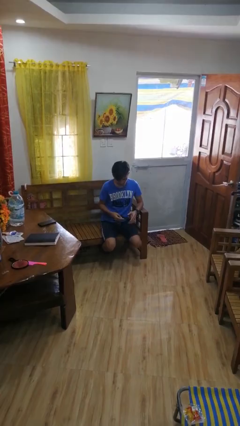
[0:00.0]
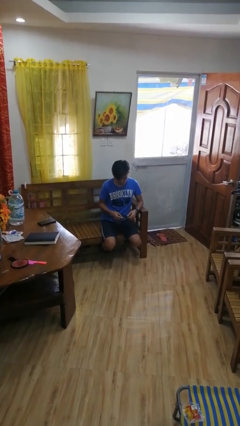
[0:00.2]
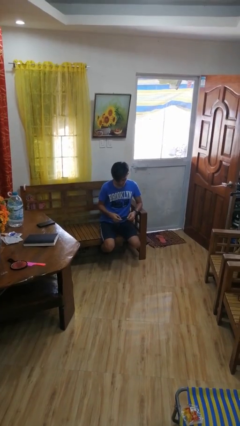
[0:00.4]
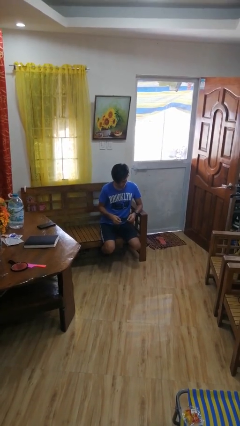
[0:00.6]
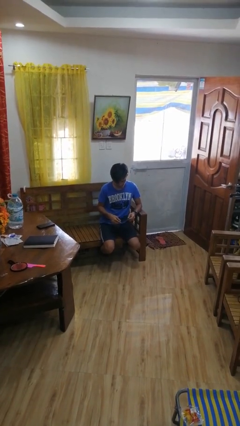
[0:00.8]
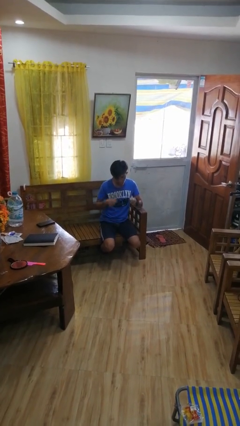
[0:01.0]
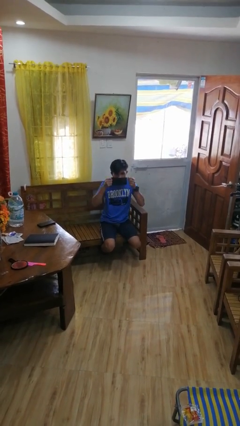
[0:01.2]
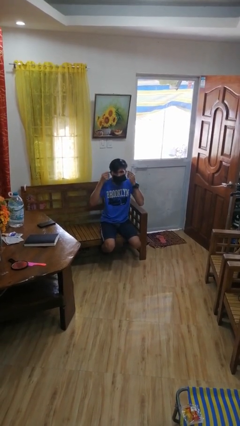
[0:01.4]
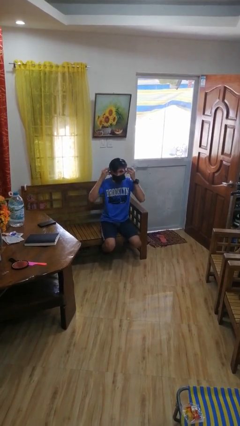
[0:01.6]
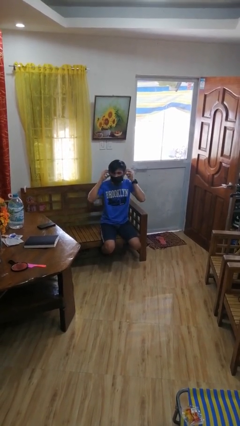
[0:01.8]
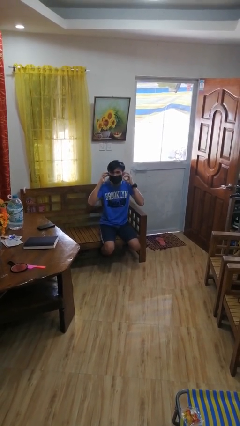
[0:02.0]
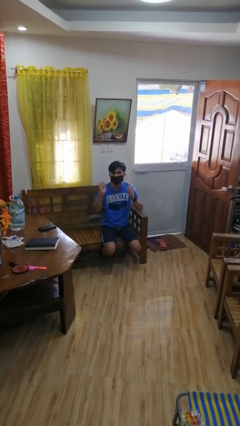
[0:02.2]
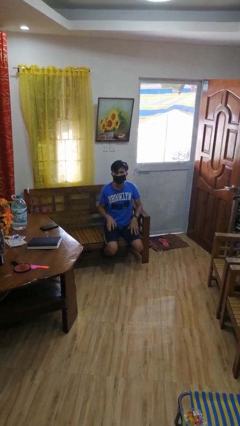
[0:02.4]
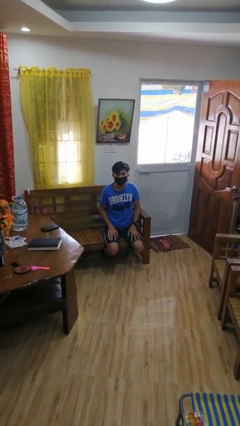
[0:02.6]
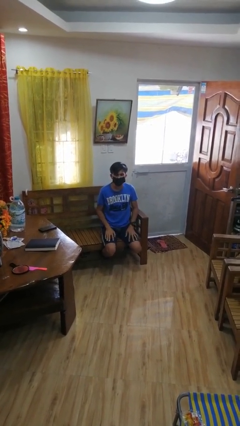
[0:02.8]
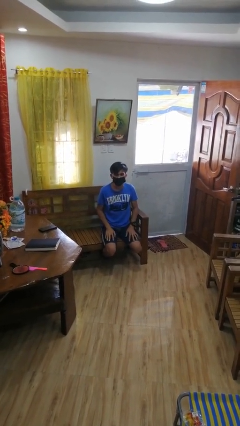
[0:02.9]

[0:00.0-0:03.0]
person puts on facemask

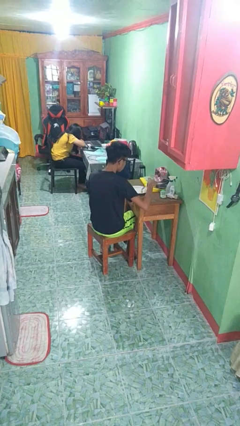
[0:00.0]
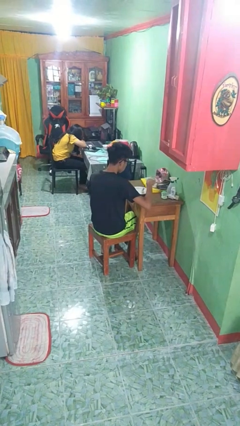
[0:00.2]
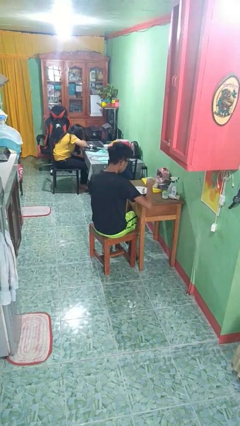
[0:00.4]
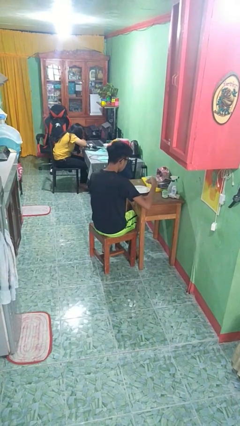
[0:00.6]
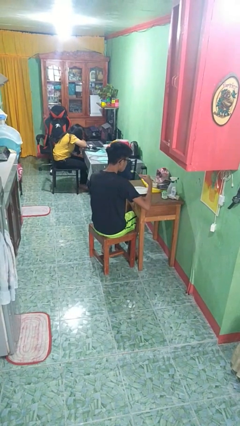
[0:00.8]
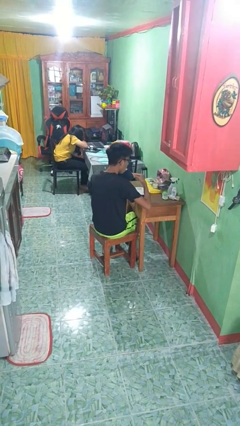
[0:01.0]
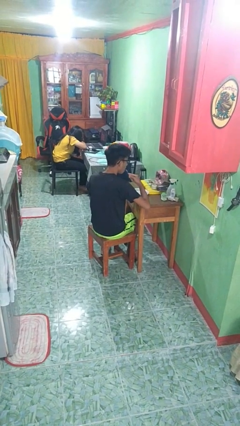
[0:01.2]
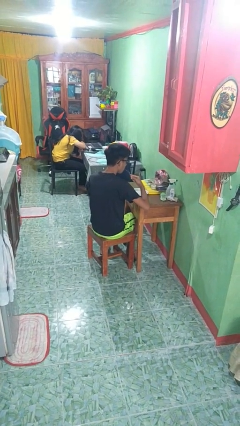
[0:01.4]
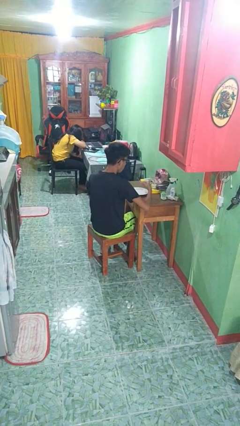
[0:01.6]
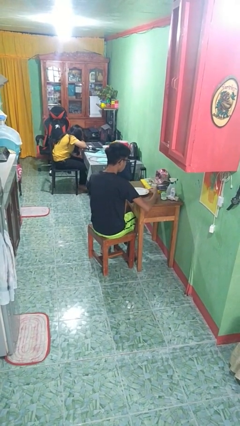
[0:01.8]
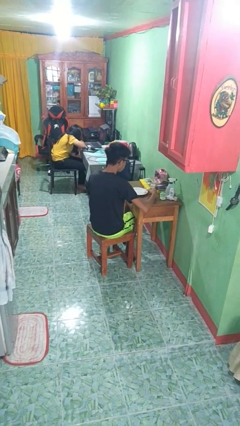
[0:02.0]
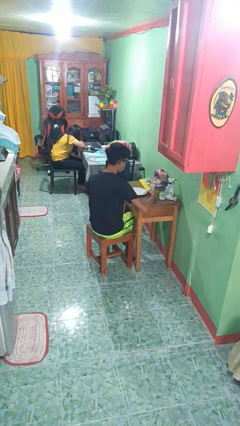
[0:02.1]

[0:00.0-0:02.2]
person eats with utensil

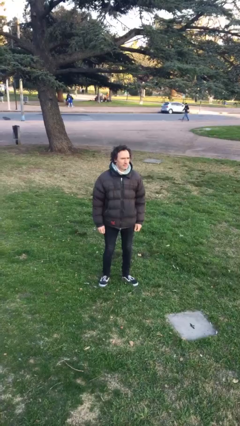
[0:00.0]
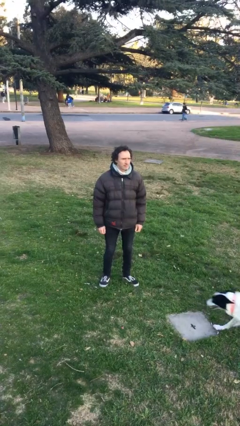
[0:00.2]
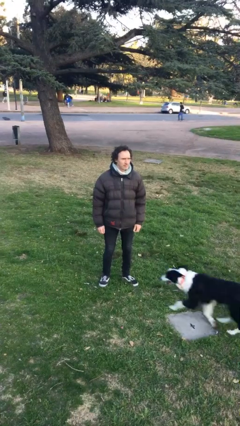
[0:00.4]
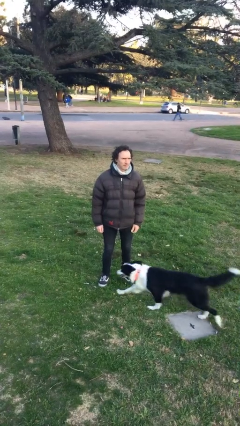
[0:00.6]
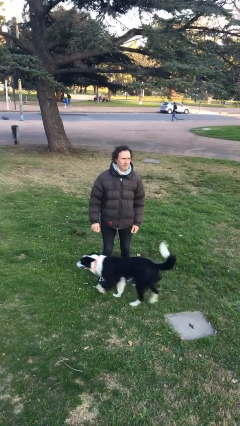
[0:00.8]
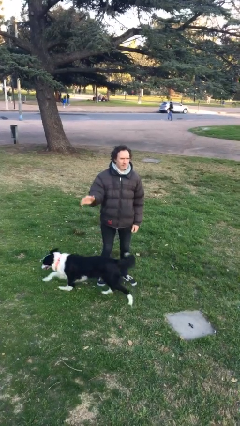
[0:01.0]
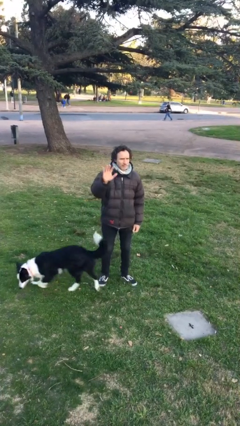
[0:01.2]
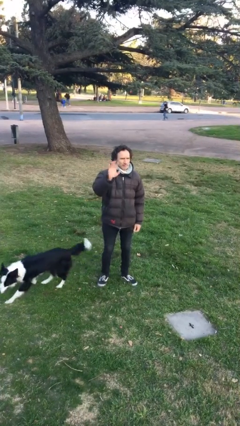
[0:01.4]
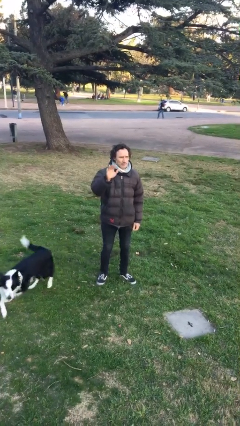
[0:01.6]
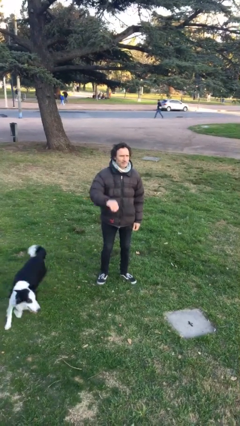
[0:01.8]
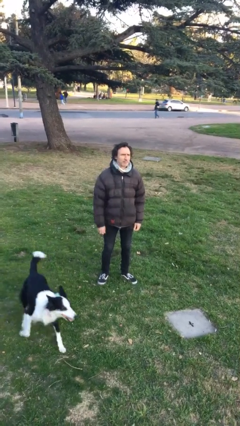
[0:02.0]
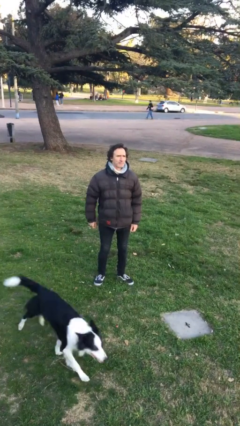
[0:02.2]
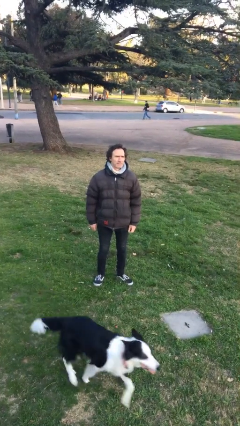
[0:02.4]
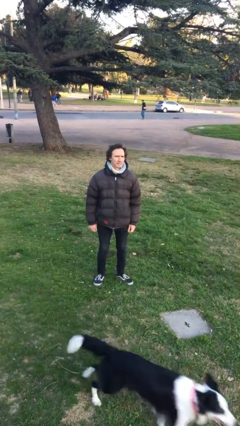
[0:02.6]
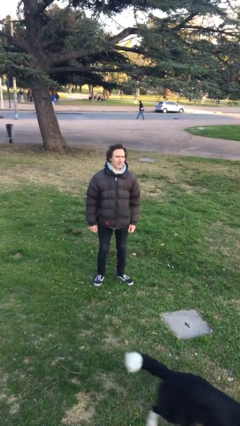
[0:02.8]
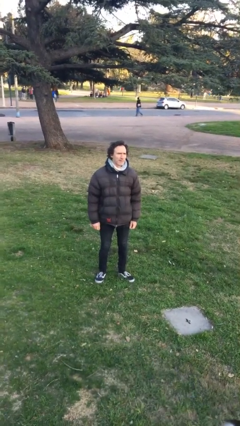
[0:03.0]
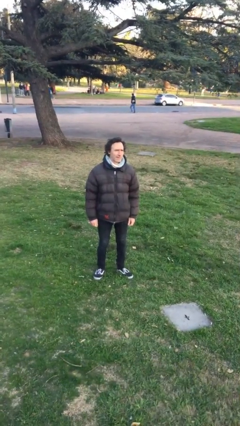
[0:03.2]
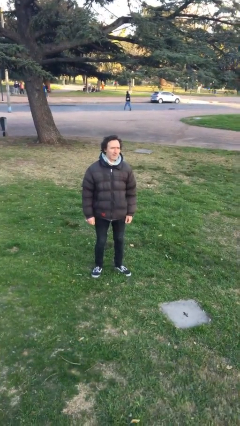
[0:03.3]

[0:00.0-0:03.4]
person waves at person

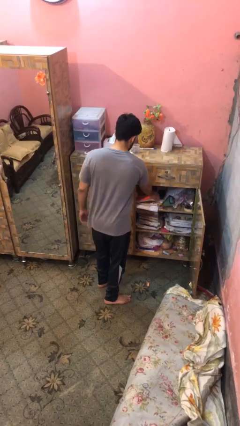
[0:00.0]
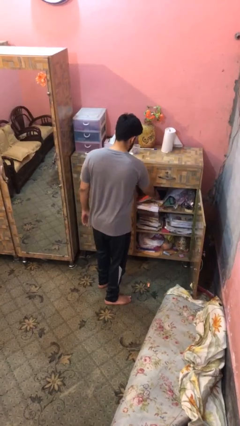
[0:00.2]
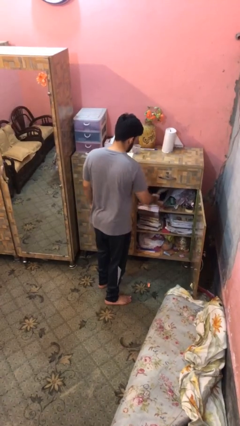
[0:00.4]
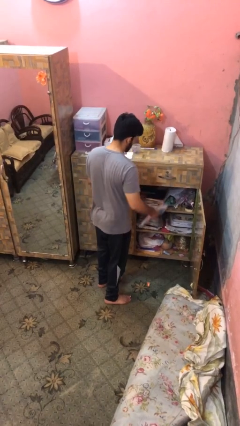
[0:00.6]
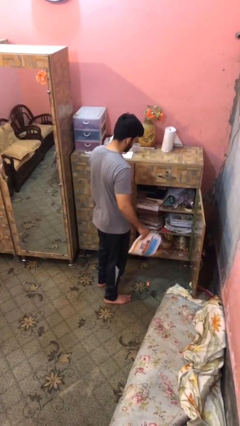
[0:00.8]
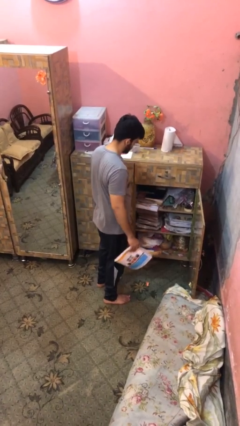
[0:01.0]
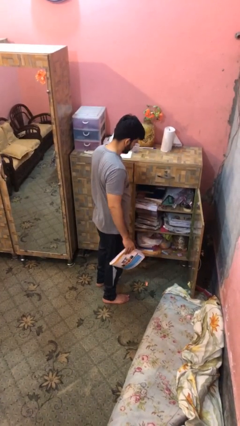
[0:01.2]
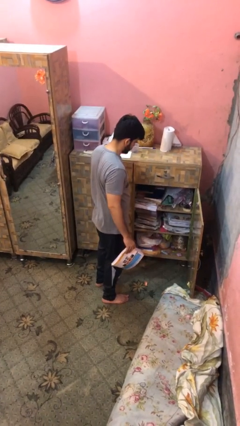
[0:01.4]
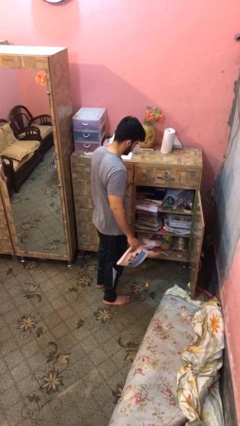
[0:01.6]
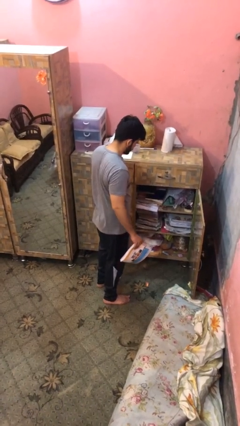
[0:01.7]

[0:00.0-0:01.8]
person picks up object from cabinet

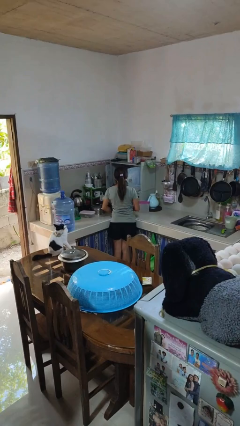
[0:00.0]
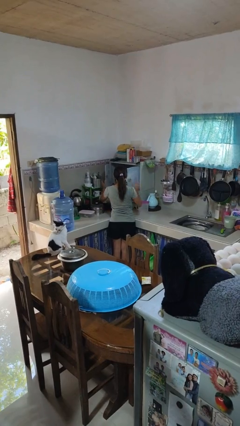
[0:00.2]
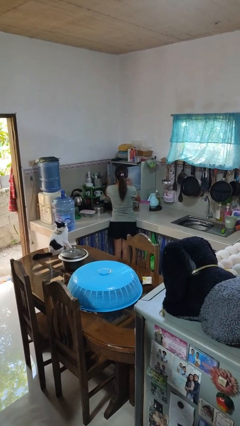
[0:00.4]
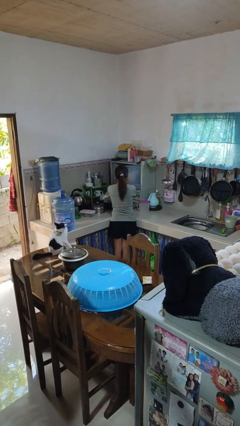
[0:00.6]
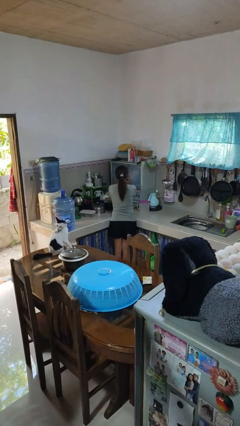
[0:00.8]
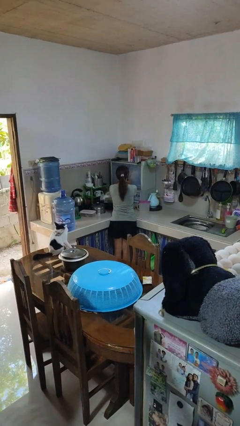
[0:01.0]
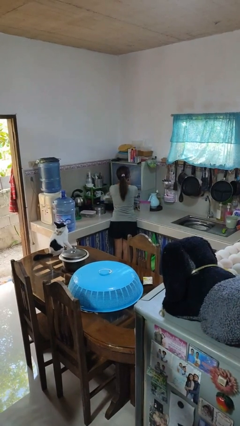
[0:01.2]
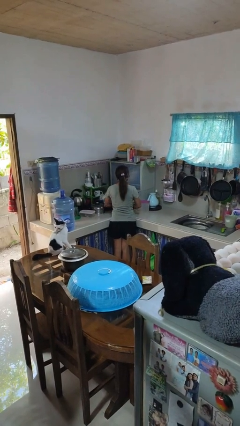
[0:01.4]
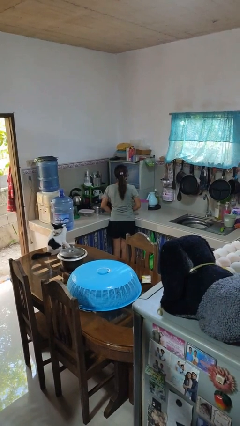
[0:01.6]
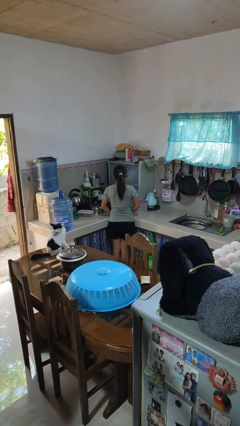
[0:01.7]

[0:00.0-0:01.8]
person closes kitchen drawer

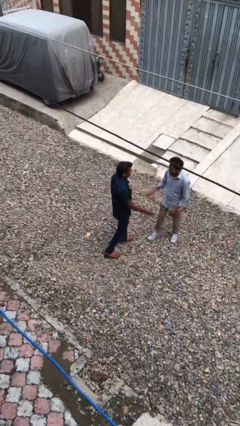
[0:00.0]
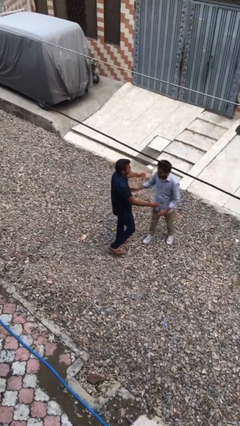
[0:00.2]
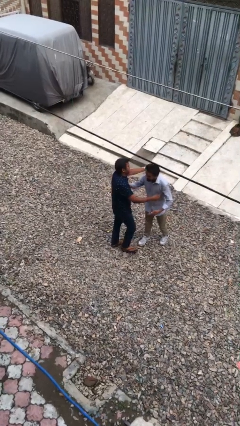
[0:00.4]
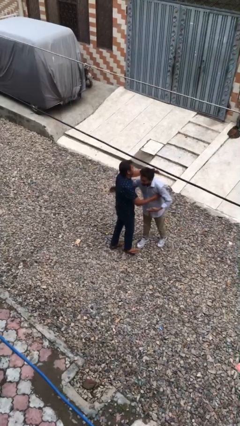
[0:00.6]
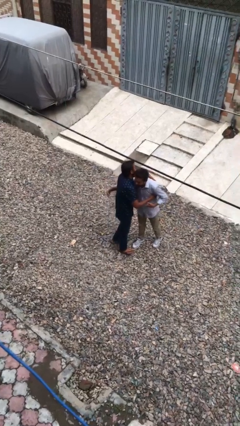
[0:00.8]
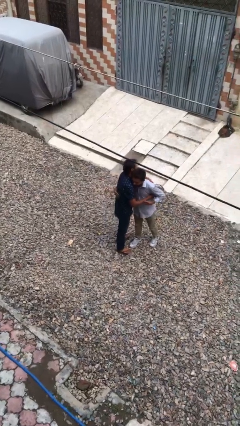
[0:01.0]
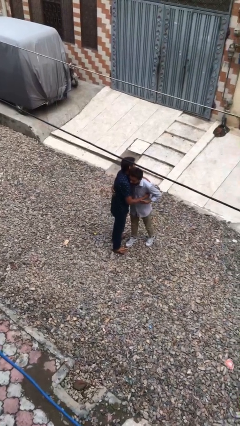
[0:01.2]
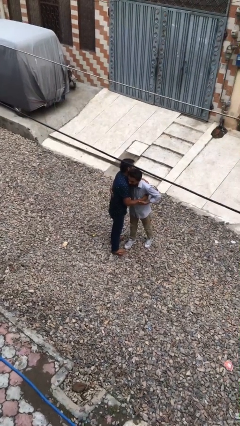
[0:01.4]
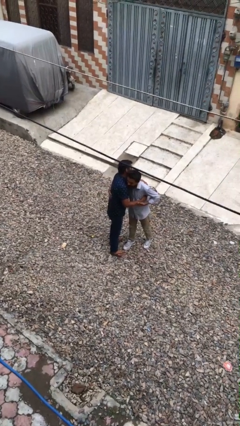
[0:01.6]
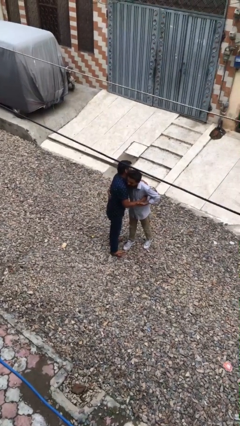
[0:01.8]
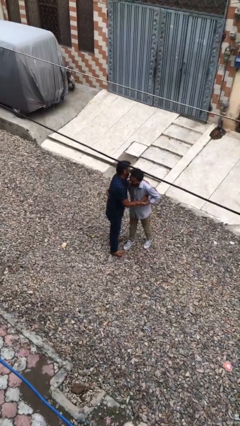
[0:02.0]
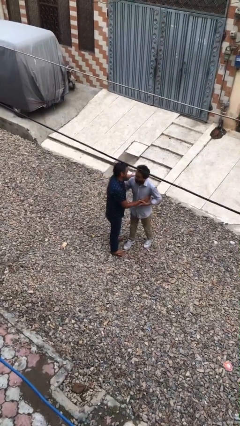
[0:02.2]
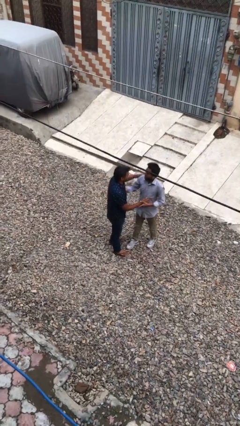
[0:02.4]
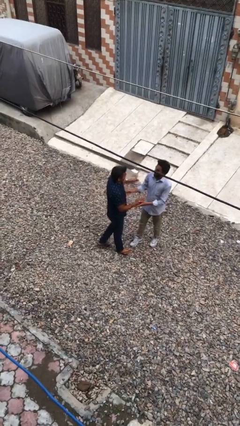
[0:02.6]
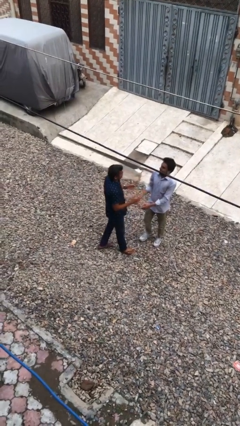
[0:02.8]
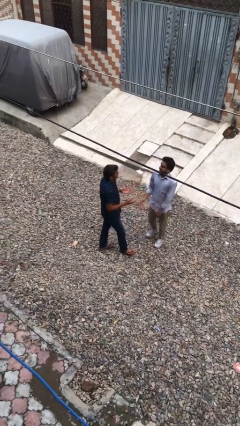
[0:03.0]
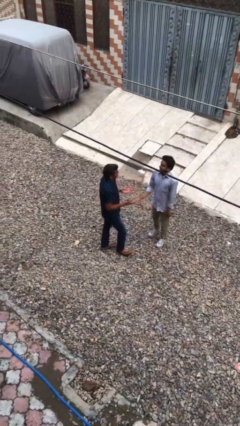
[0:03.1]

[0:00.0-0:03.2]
person embraces person

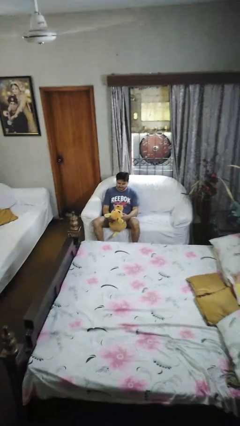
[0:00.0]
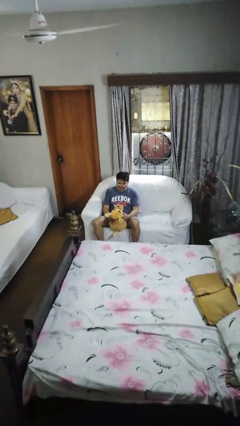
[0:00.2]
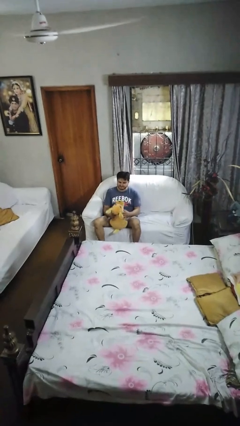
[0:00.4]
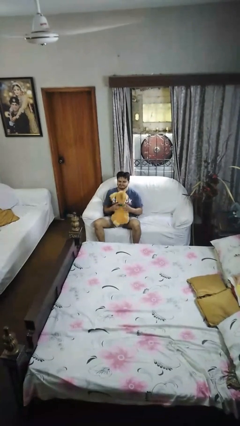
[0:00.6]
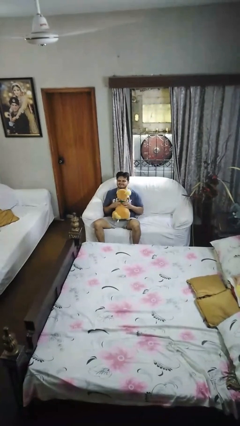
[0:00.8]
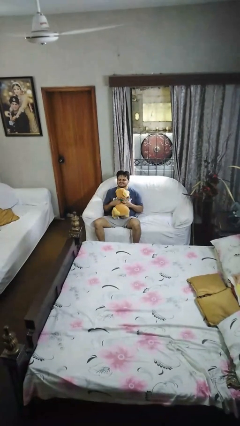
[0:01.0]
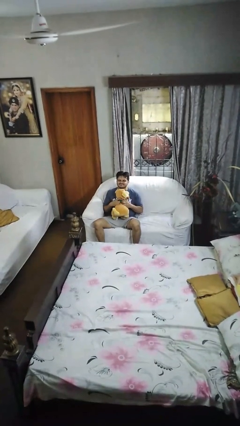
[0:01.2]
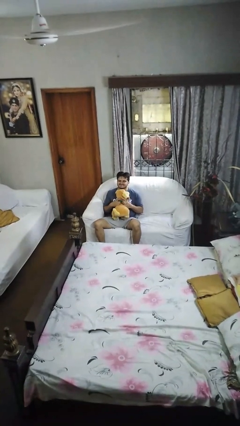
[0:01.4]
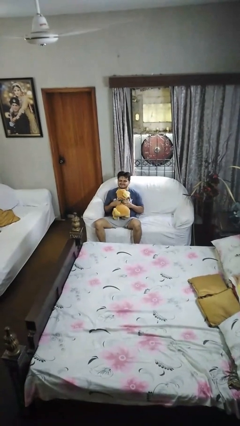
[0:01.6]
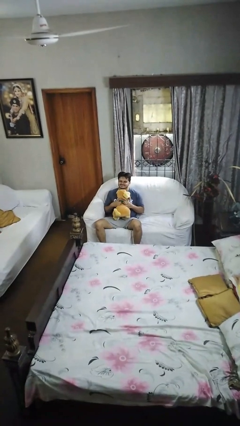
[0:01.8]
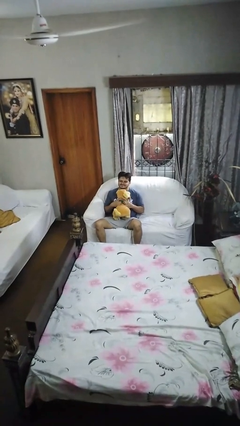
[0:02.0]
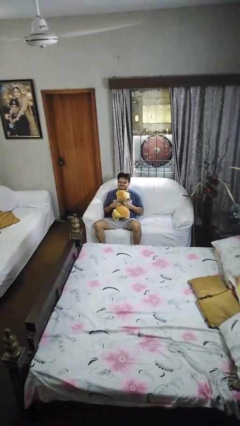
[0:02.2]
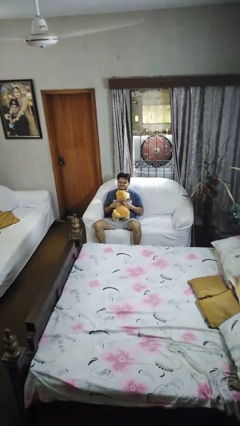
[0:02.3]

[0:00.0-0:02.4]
person hugs stuffed animal
